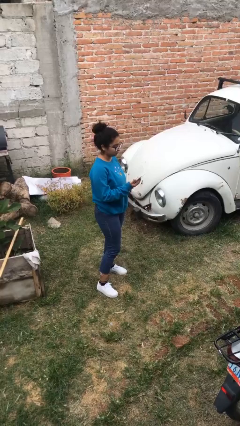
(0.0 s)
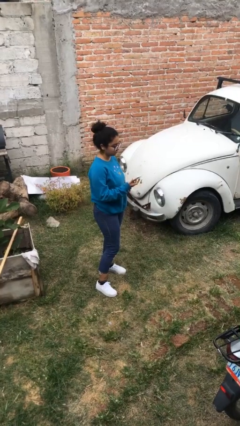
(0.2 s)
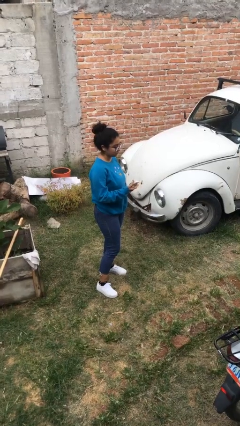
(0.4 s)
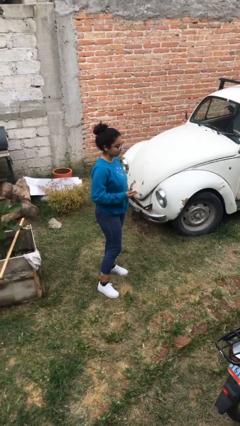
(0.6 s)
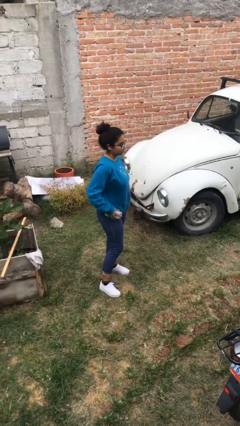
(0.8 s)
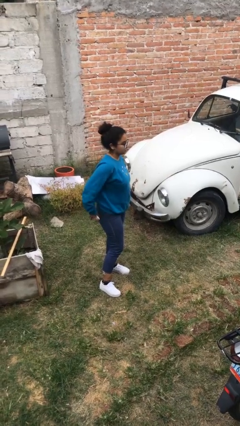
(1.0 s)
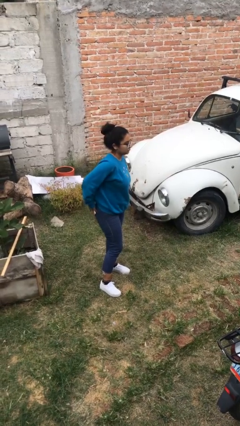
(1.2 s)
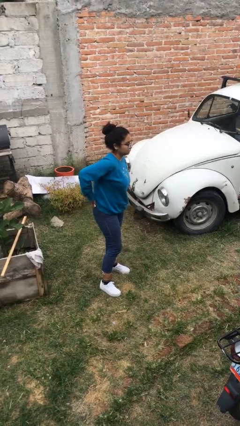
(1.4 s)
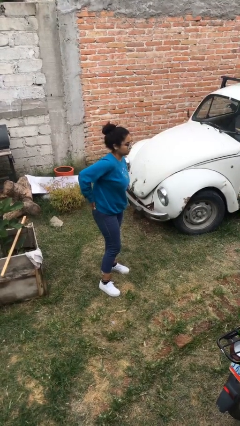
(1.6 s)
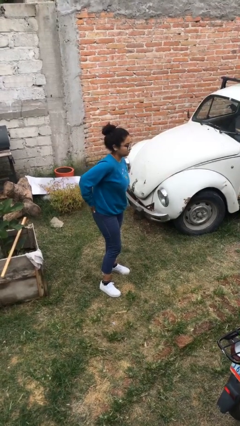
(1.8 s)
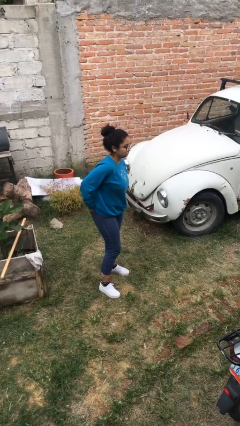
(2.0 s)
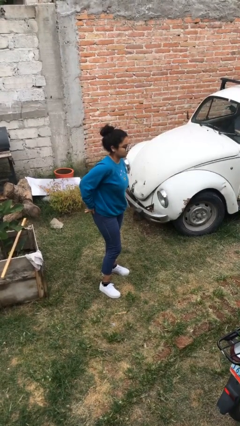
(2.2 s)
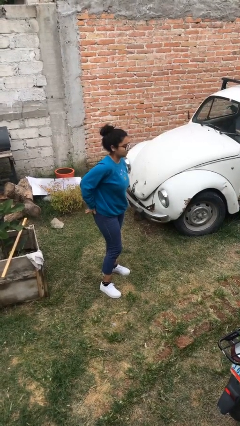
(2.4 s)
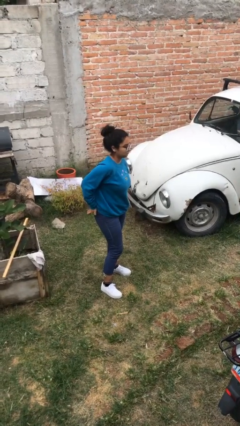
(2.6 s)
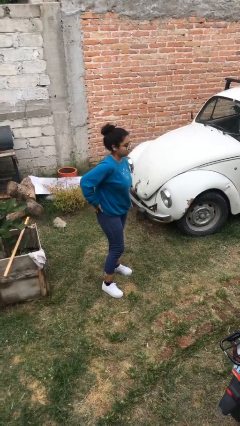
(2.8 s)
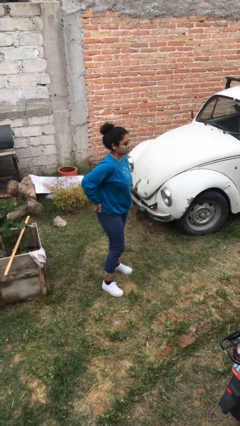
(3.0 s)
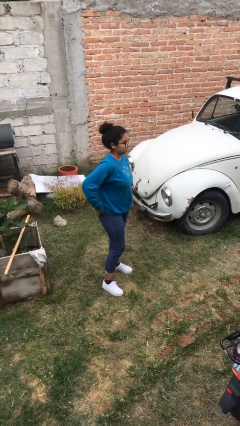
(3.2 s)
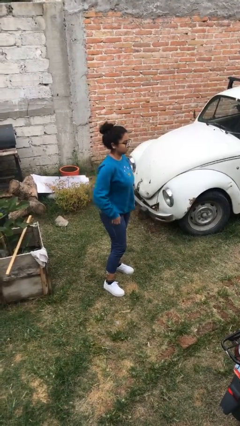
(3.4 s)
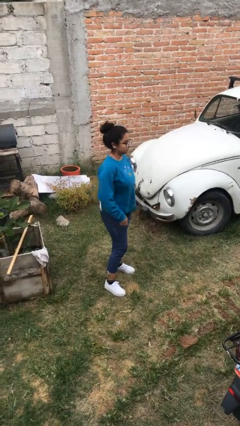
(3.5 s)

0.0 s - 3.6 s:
person puts phone into pocket

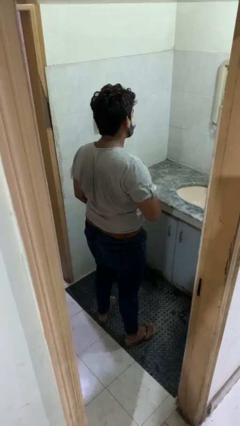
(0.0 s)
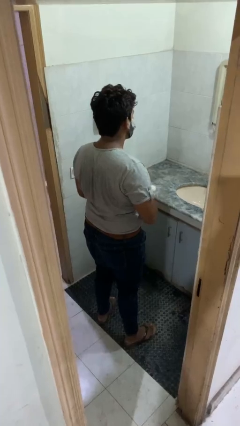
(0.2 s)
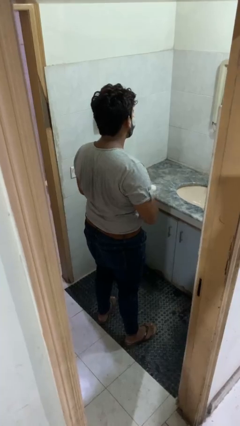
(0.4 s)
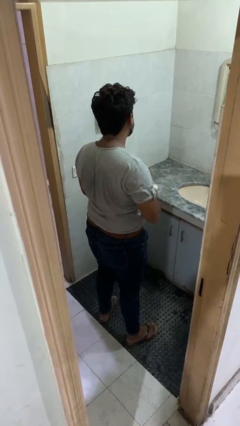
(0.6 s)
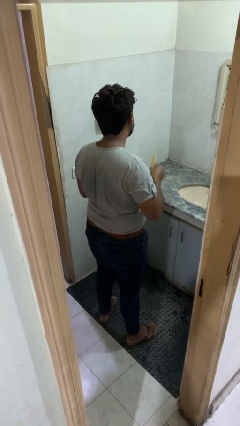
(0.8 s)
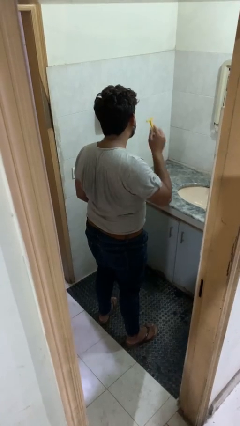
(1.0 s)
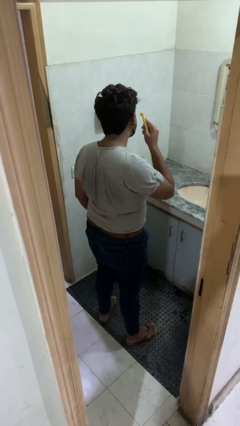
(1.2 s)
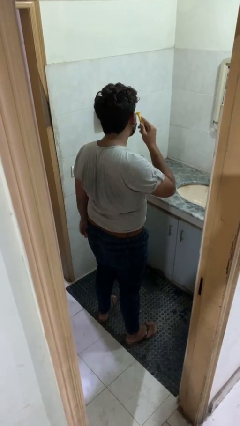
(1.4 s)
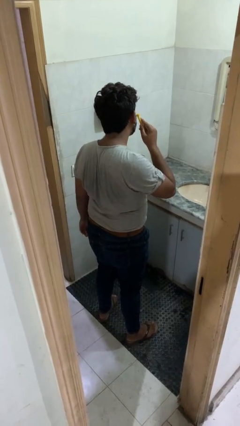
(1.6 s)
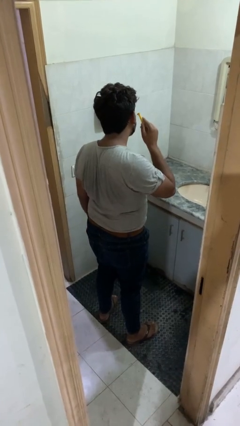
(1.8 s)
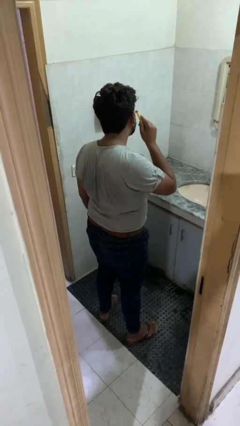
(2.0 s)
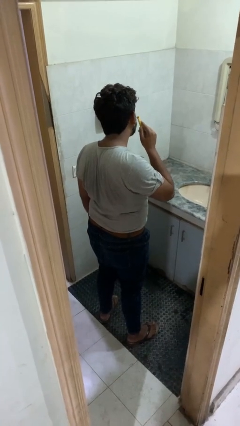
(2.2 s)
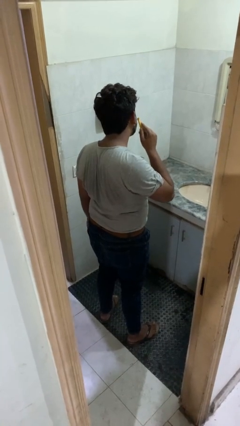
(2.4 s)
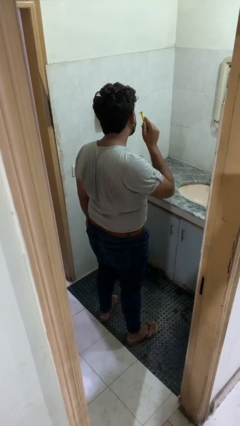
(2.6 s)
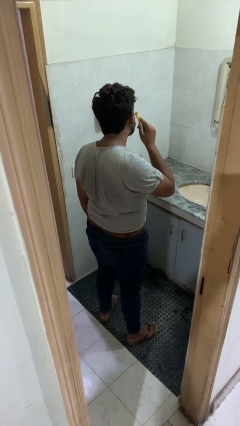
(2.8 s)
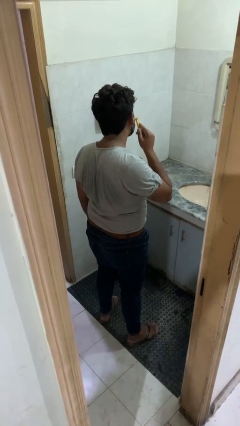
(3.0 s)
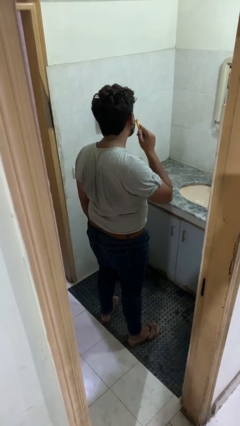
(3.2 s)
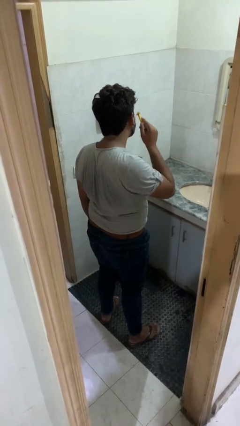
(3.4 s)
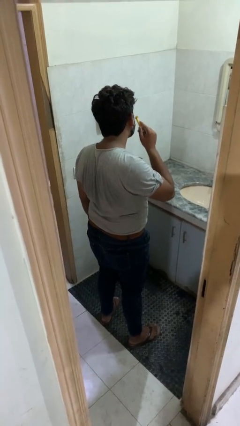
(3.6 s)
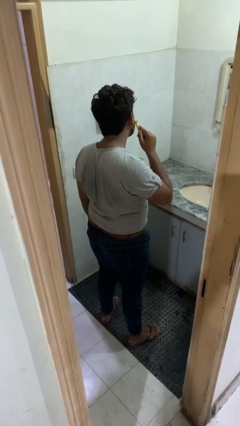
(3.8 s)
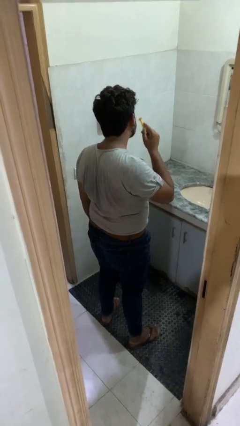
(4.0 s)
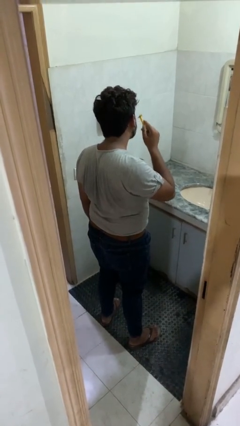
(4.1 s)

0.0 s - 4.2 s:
person shaves face

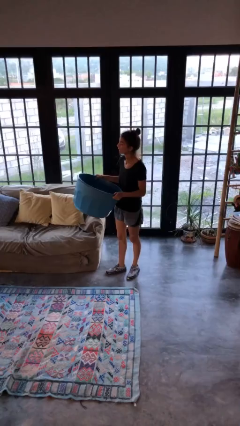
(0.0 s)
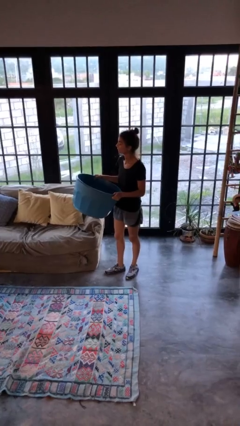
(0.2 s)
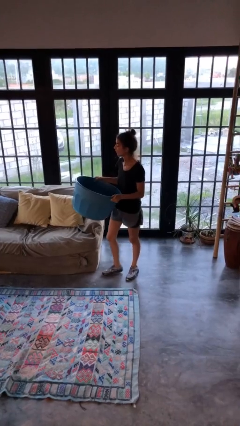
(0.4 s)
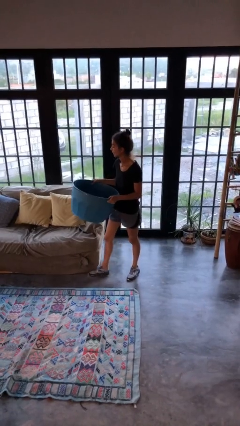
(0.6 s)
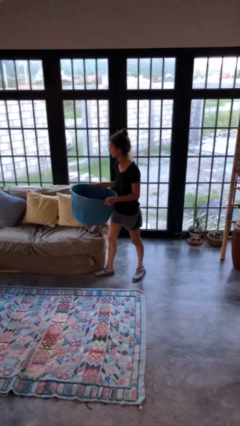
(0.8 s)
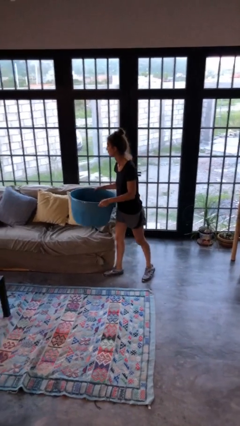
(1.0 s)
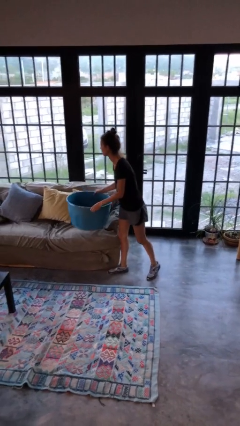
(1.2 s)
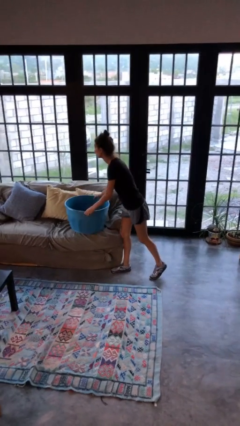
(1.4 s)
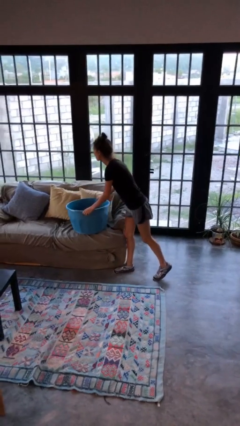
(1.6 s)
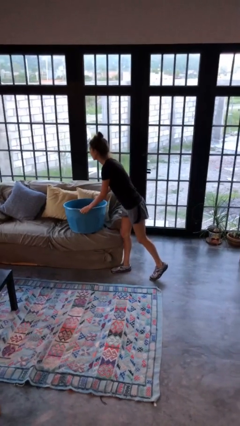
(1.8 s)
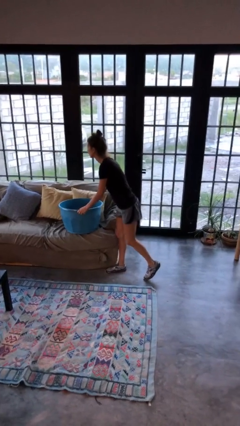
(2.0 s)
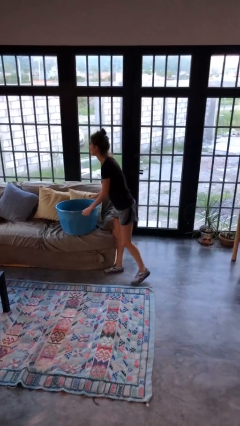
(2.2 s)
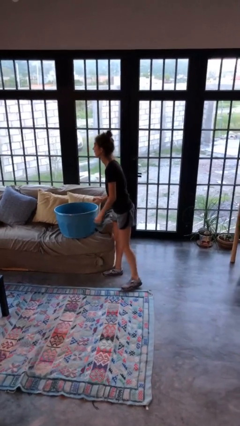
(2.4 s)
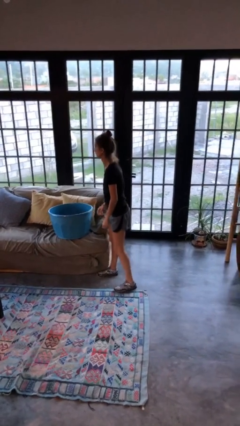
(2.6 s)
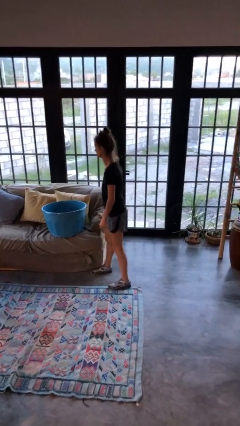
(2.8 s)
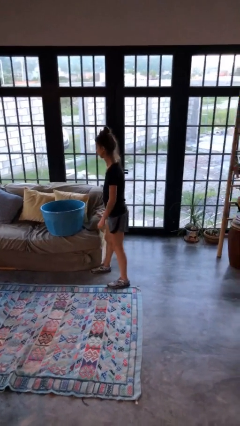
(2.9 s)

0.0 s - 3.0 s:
person puts down object on couch

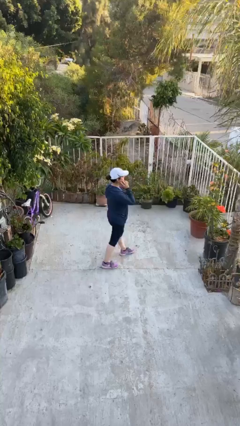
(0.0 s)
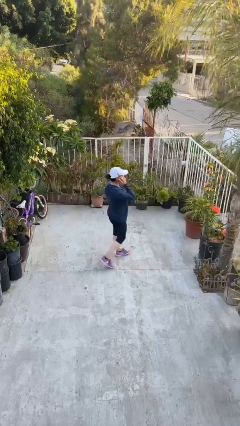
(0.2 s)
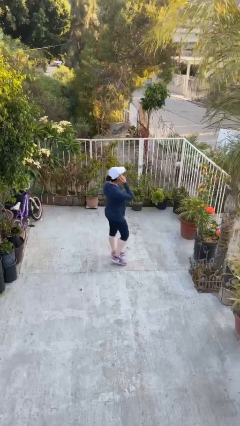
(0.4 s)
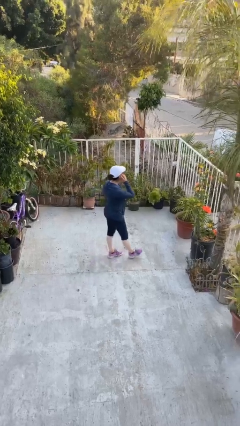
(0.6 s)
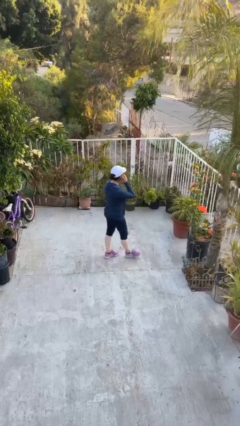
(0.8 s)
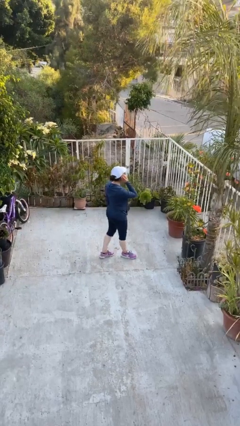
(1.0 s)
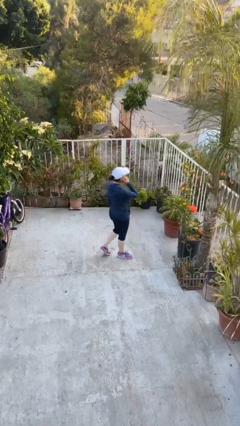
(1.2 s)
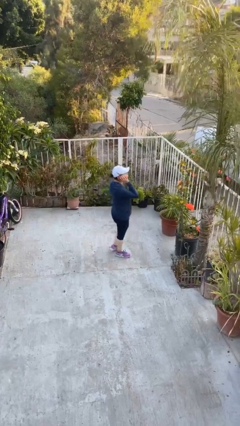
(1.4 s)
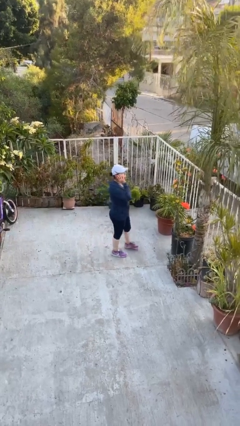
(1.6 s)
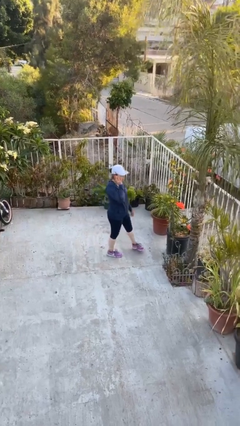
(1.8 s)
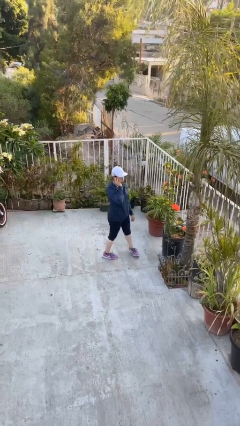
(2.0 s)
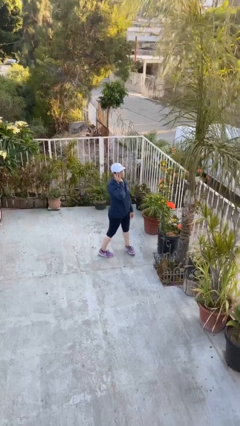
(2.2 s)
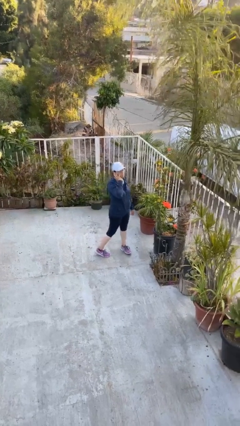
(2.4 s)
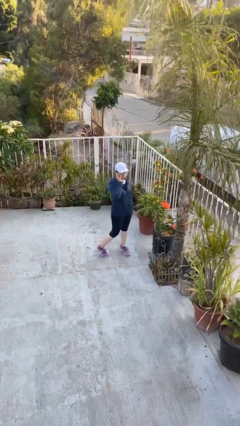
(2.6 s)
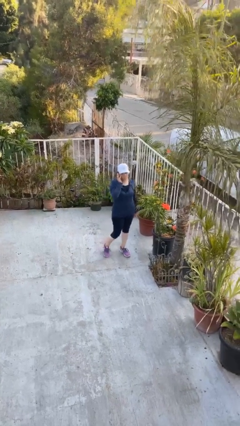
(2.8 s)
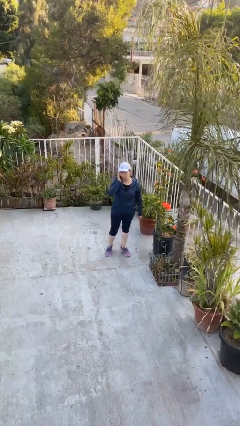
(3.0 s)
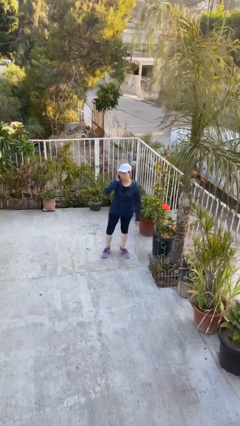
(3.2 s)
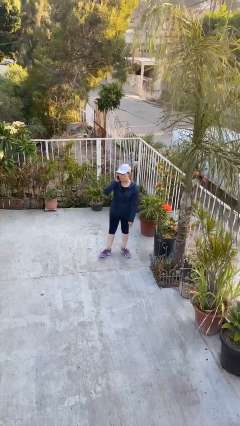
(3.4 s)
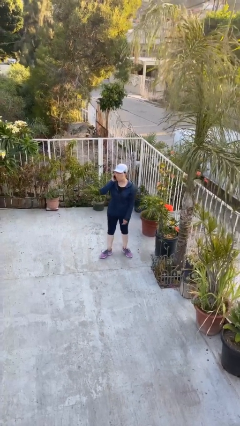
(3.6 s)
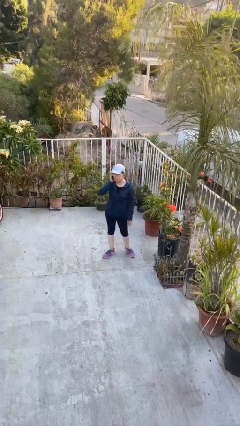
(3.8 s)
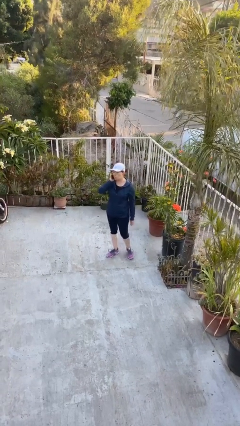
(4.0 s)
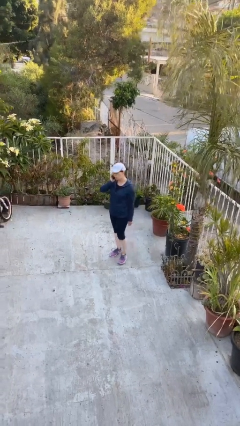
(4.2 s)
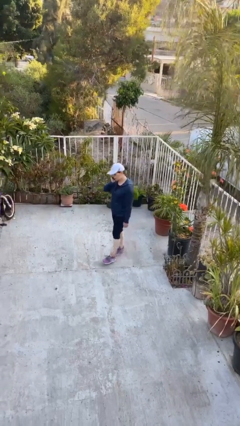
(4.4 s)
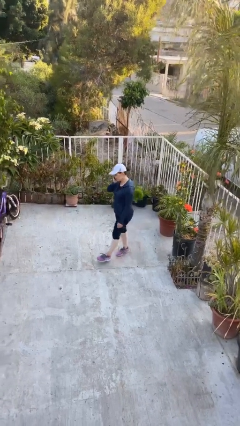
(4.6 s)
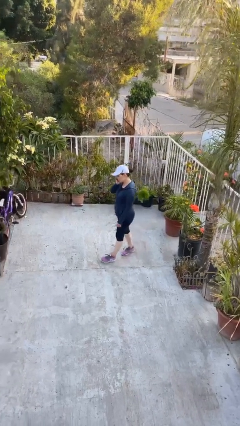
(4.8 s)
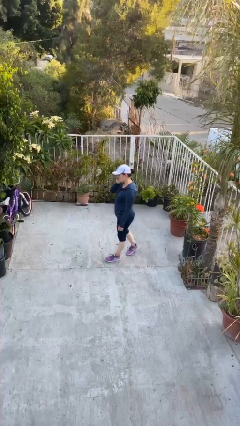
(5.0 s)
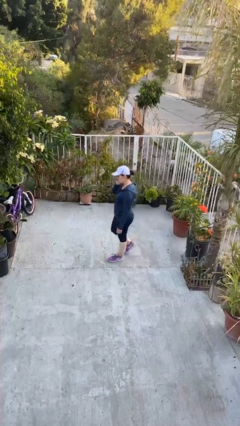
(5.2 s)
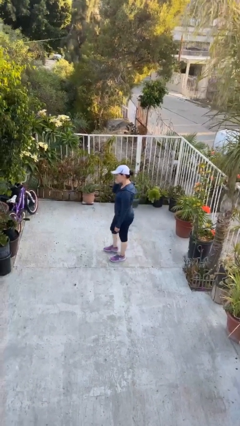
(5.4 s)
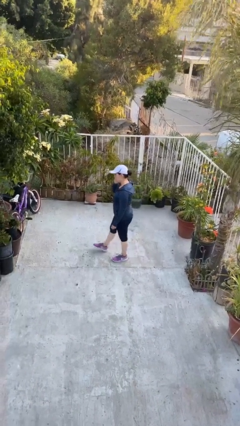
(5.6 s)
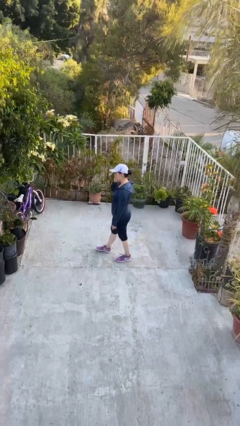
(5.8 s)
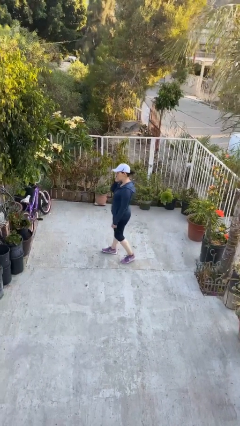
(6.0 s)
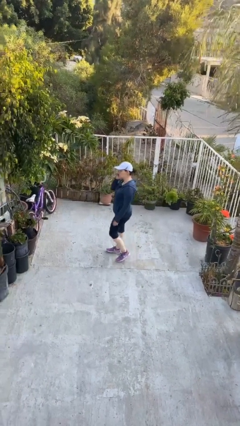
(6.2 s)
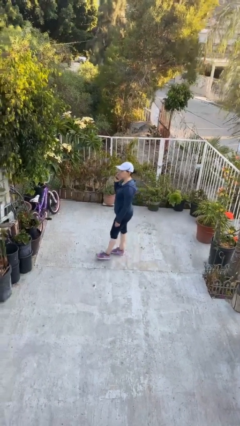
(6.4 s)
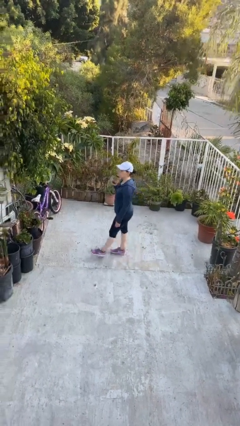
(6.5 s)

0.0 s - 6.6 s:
person talks on phone

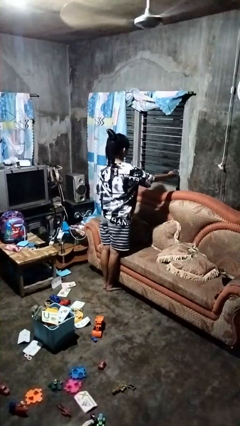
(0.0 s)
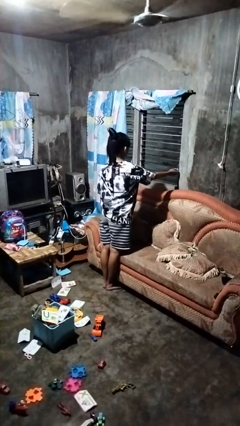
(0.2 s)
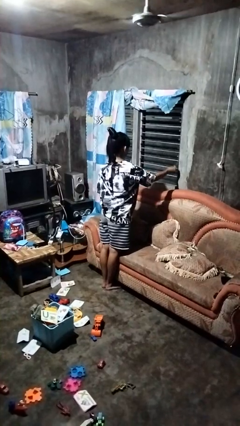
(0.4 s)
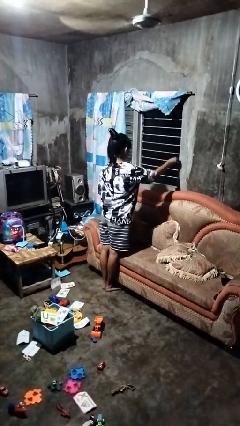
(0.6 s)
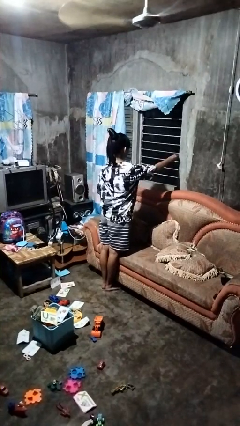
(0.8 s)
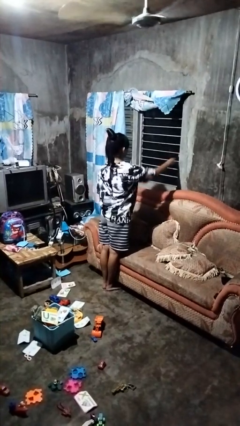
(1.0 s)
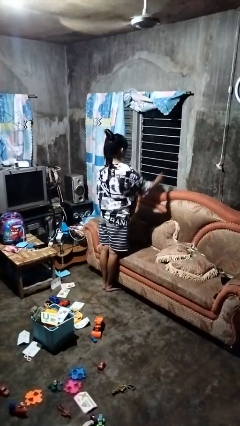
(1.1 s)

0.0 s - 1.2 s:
person closes home window
